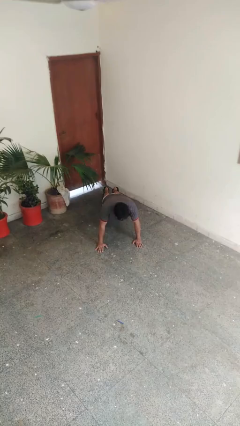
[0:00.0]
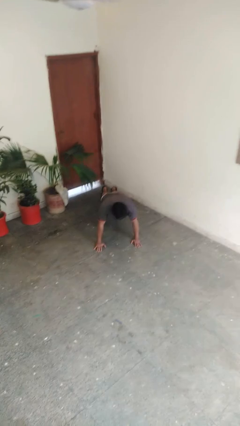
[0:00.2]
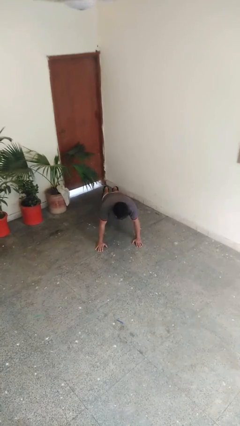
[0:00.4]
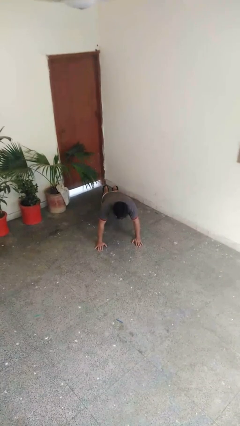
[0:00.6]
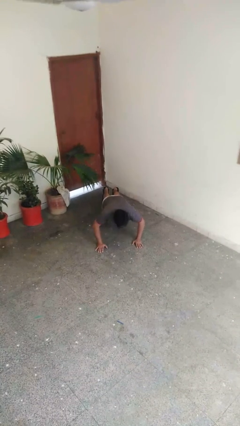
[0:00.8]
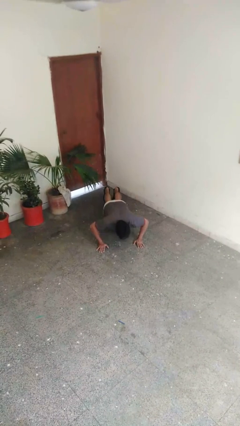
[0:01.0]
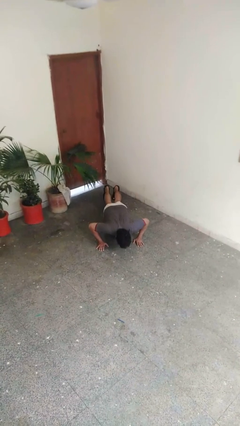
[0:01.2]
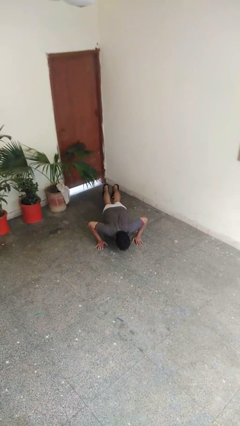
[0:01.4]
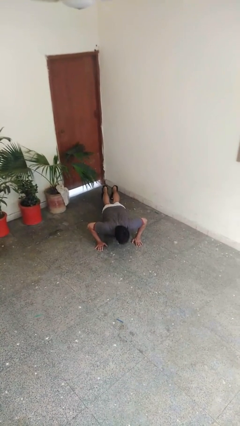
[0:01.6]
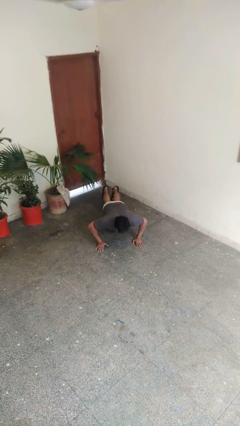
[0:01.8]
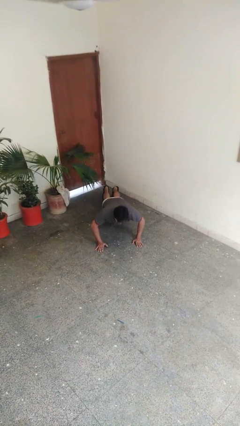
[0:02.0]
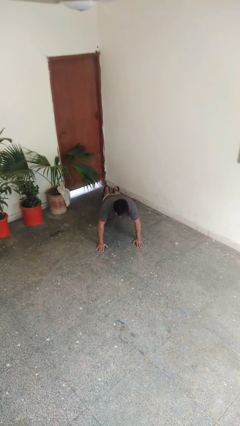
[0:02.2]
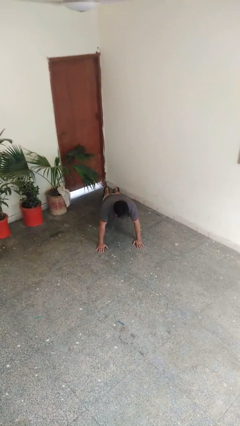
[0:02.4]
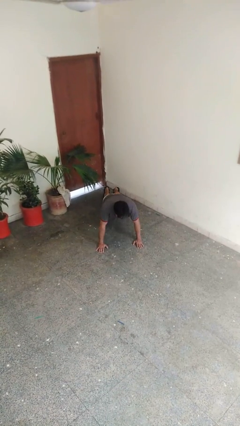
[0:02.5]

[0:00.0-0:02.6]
person exercises with pushup

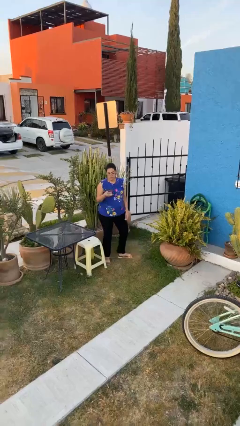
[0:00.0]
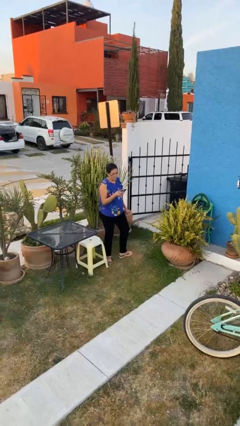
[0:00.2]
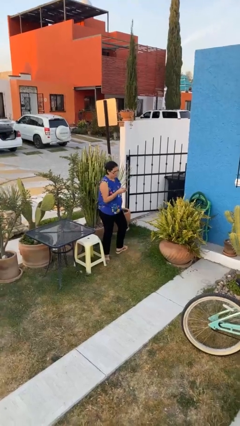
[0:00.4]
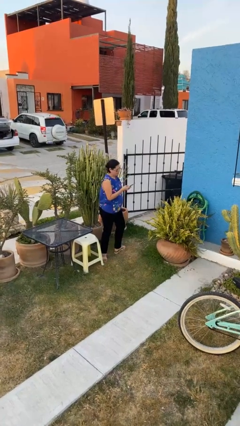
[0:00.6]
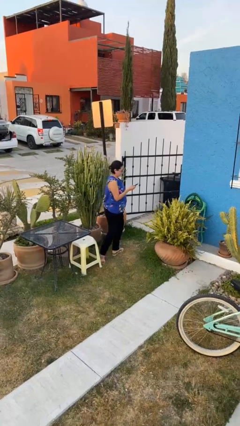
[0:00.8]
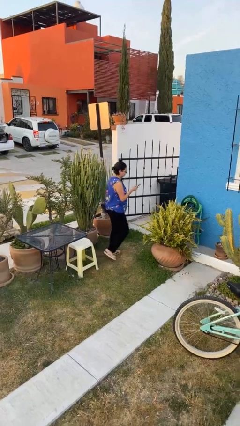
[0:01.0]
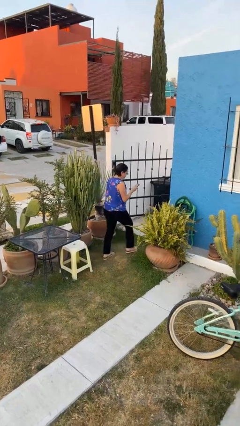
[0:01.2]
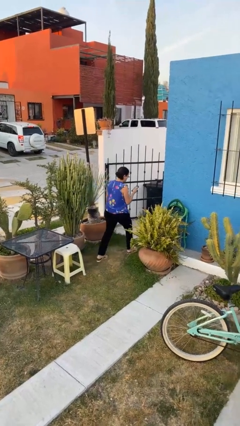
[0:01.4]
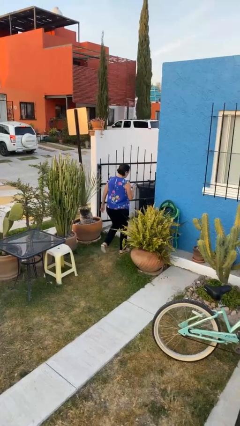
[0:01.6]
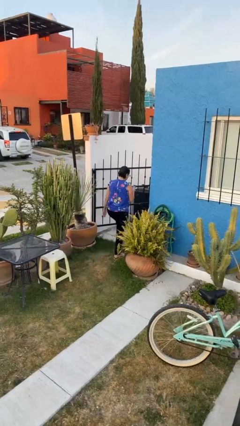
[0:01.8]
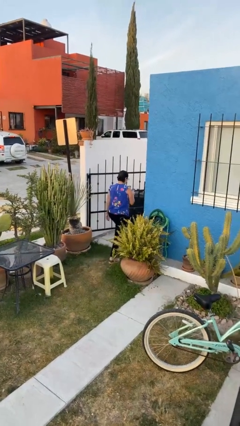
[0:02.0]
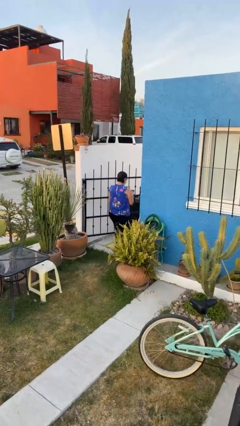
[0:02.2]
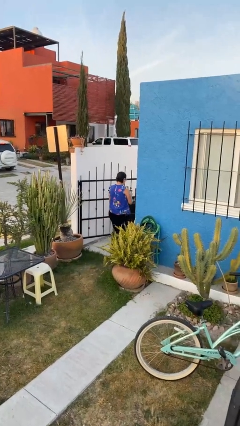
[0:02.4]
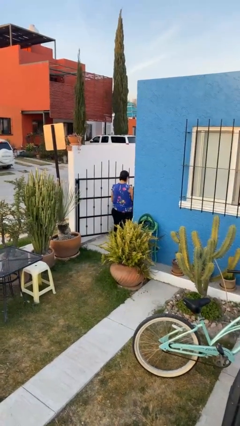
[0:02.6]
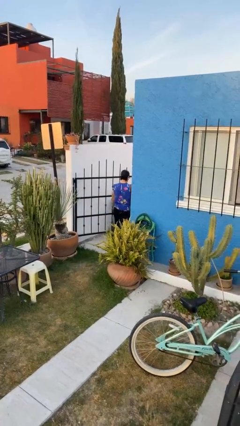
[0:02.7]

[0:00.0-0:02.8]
person exits scene through structure

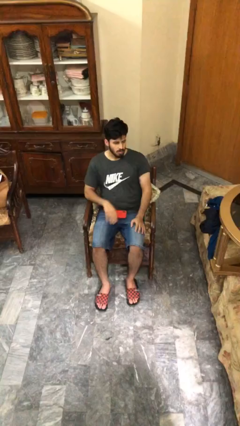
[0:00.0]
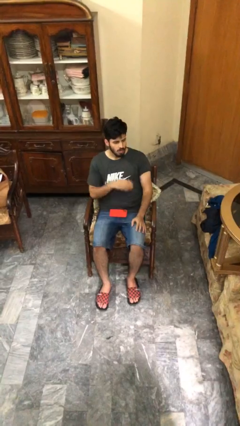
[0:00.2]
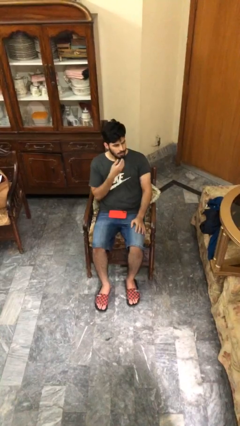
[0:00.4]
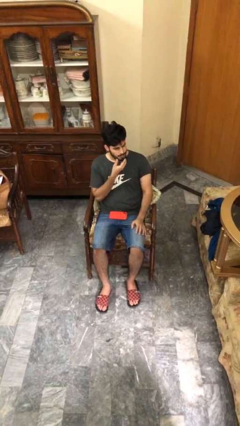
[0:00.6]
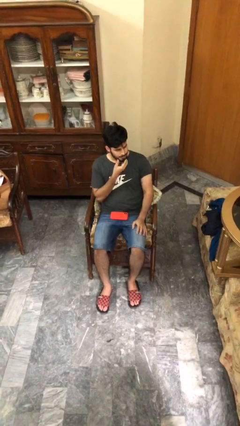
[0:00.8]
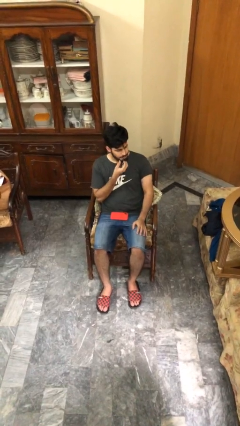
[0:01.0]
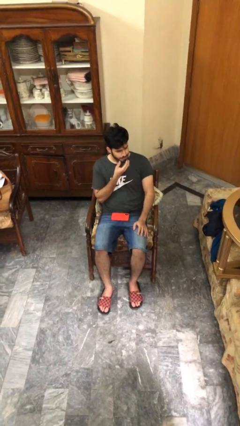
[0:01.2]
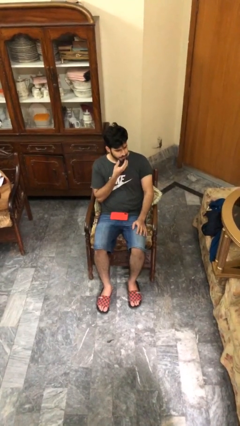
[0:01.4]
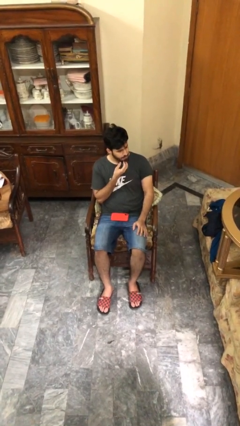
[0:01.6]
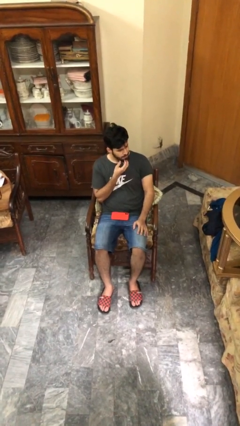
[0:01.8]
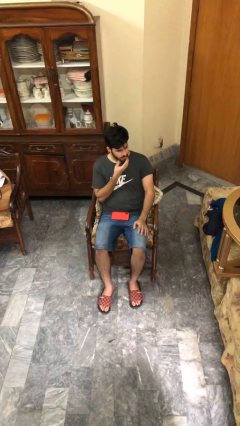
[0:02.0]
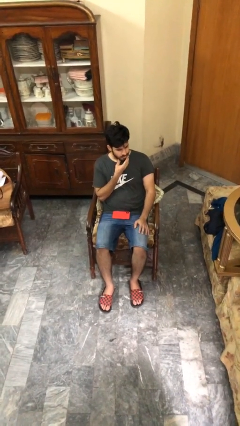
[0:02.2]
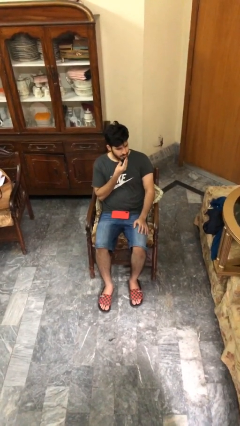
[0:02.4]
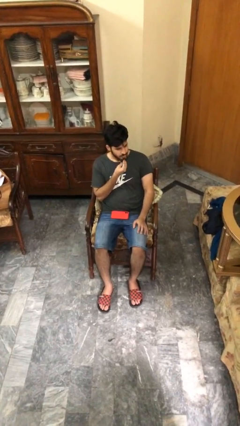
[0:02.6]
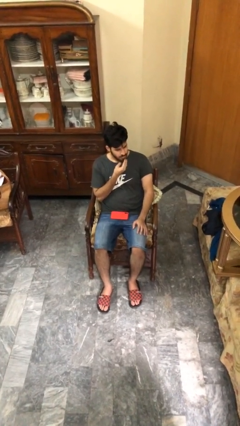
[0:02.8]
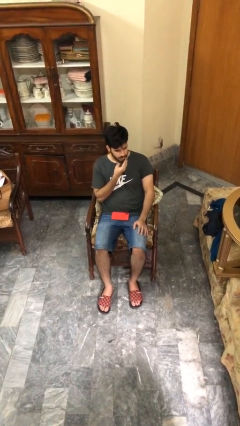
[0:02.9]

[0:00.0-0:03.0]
person strokes chin

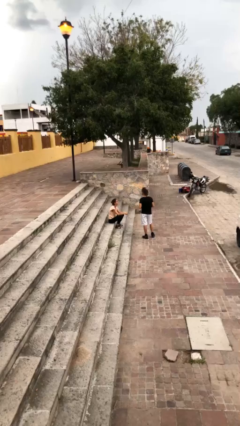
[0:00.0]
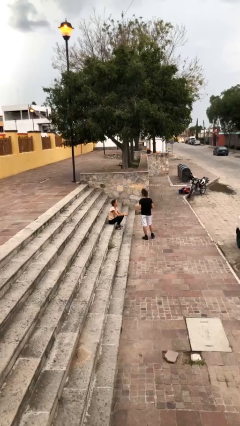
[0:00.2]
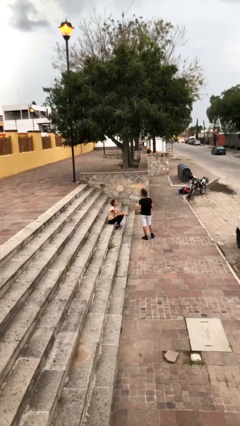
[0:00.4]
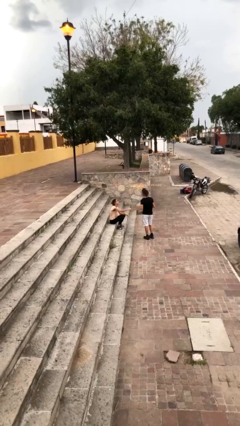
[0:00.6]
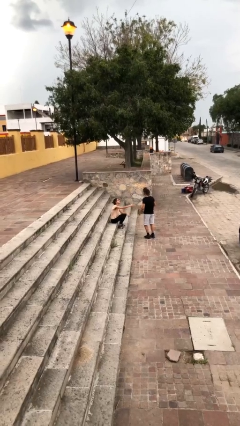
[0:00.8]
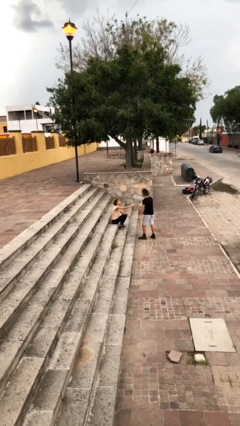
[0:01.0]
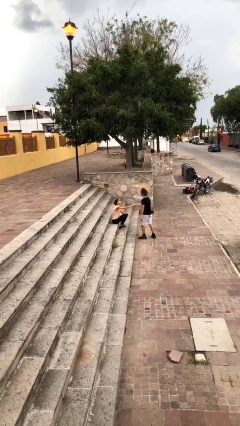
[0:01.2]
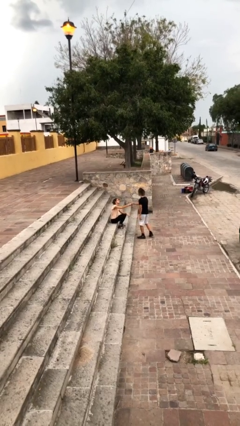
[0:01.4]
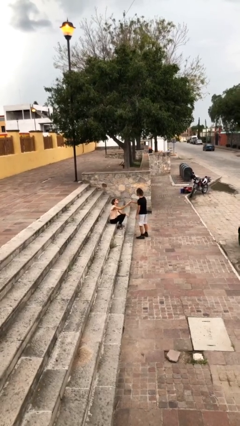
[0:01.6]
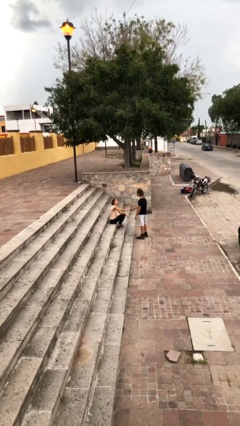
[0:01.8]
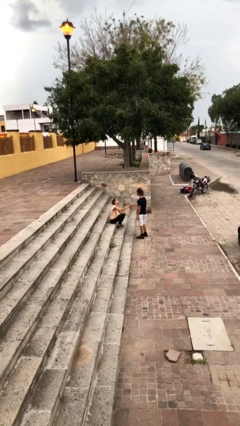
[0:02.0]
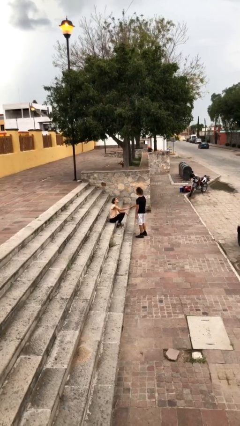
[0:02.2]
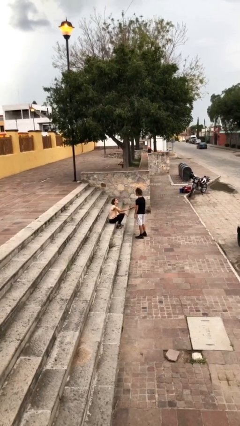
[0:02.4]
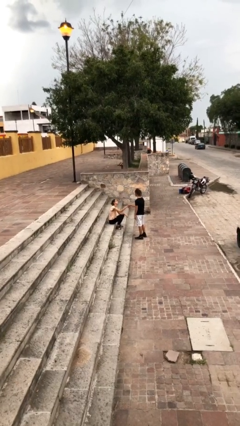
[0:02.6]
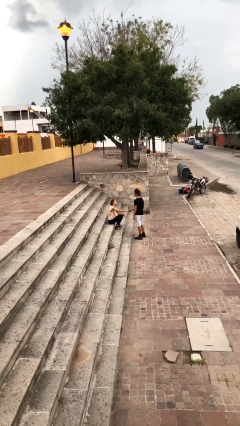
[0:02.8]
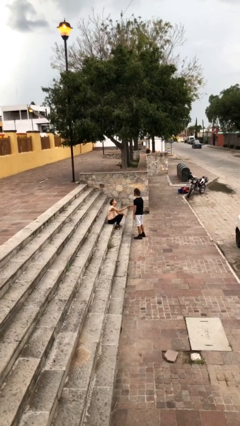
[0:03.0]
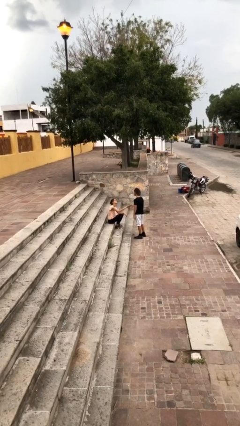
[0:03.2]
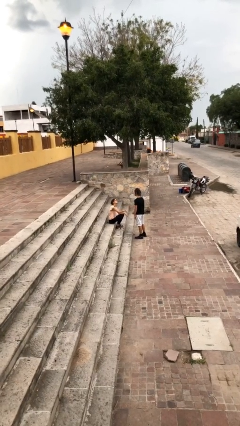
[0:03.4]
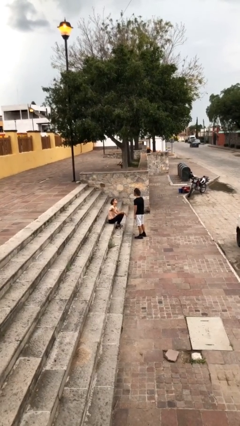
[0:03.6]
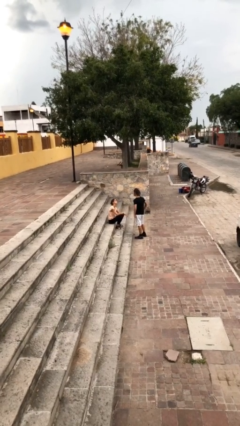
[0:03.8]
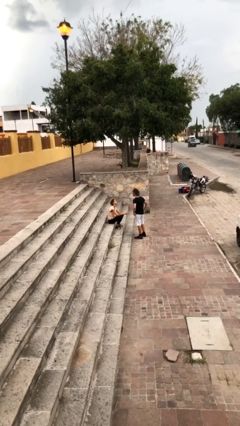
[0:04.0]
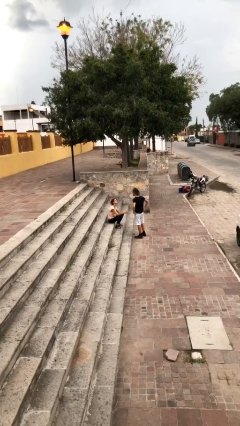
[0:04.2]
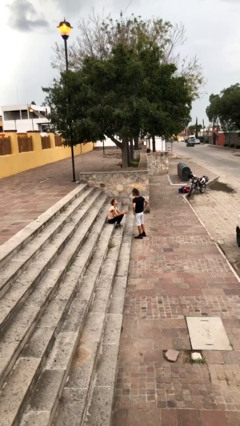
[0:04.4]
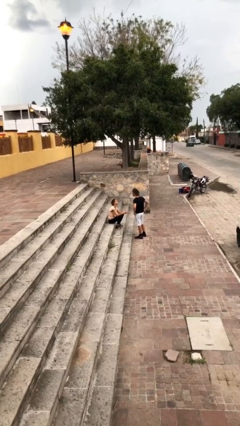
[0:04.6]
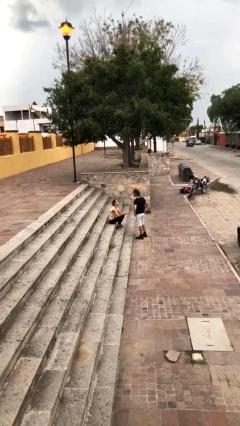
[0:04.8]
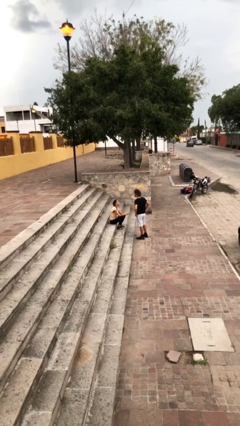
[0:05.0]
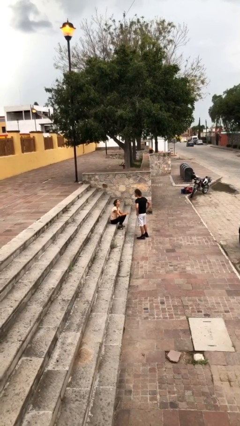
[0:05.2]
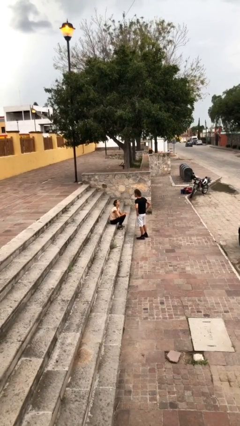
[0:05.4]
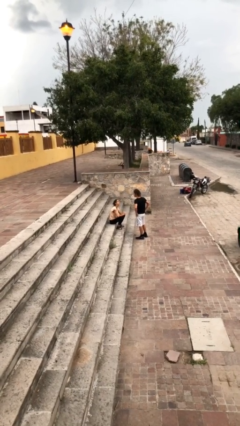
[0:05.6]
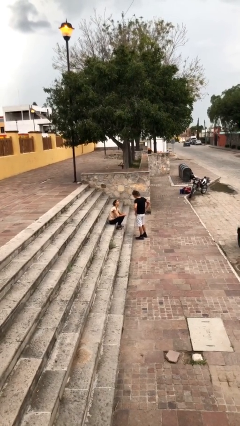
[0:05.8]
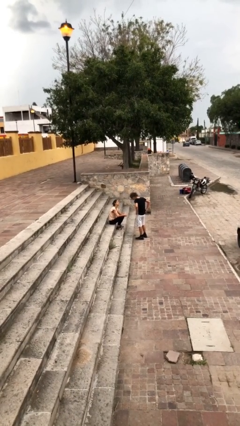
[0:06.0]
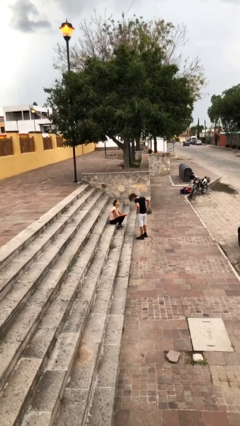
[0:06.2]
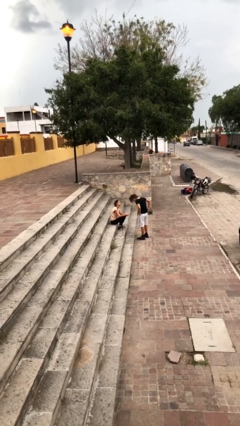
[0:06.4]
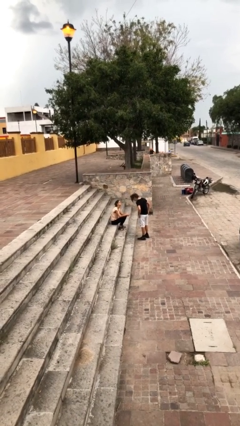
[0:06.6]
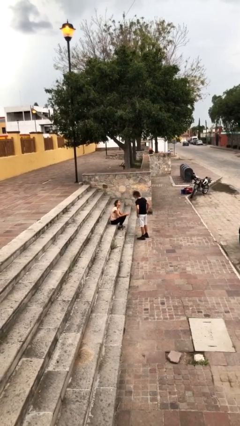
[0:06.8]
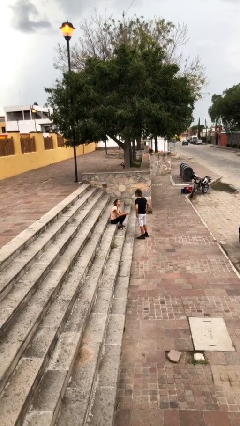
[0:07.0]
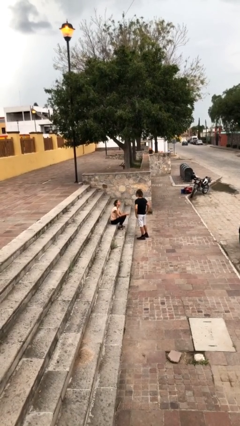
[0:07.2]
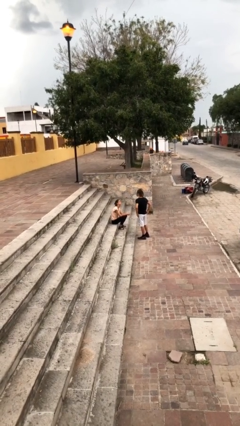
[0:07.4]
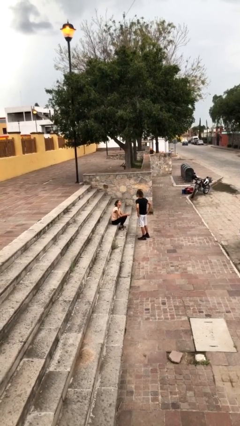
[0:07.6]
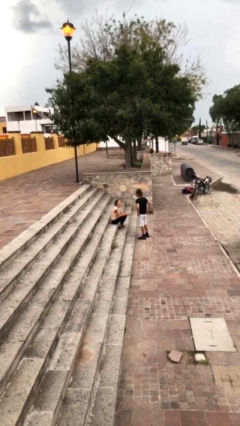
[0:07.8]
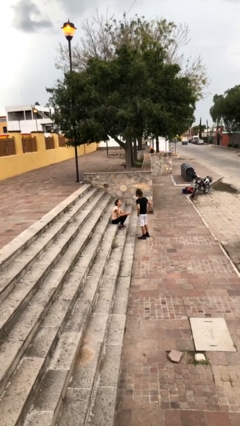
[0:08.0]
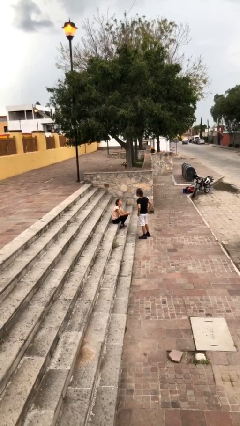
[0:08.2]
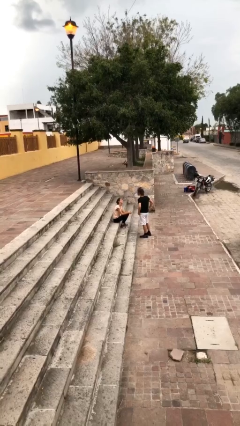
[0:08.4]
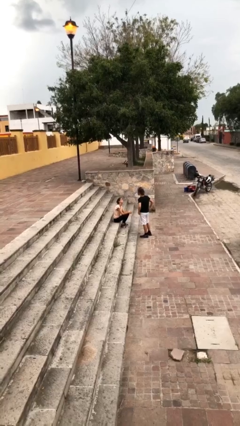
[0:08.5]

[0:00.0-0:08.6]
person shakes hand

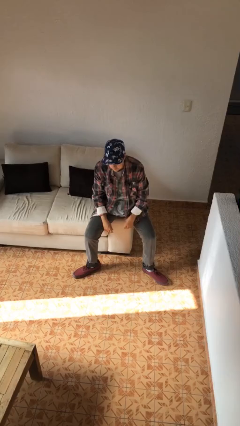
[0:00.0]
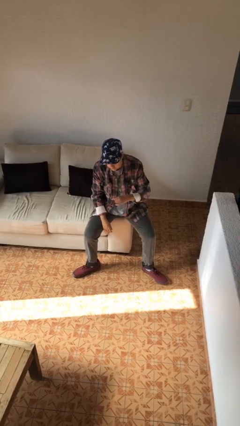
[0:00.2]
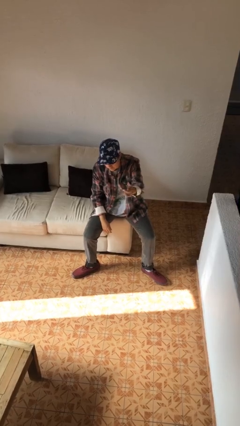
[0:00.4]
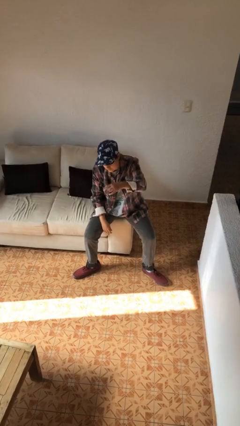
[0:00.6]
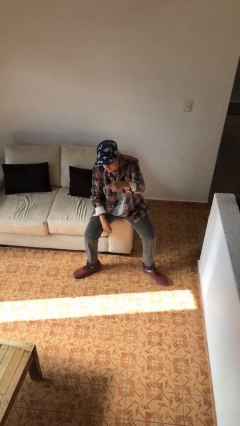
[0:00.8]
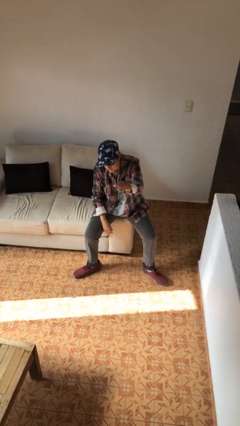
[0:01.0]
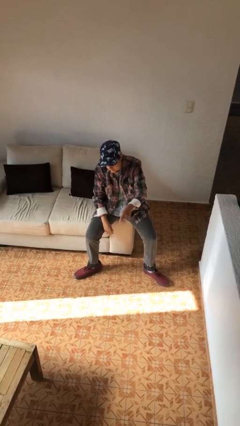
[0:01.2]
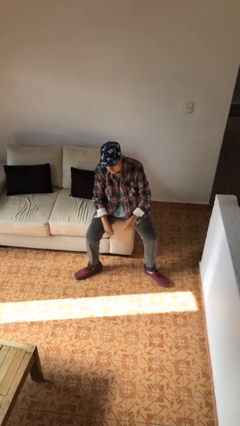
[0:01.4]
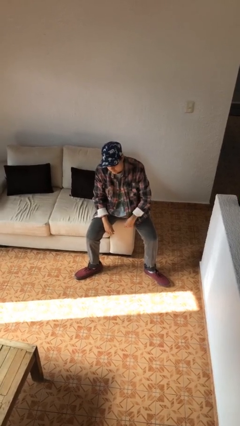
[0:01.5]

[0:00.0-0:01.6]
person snaps fingers
